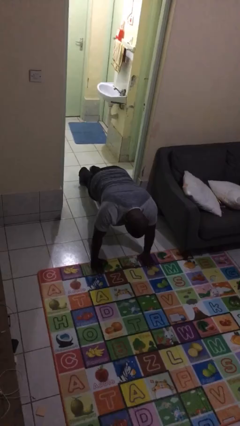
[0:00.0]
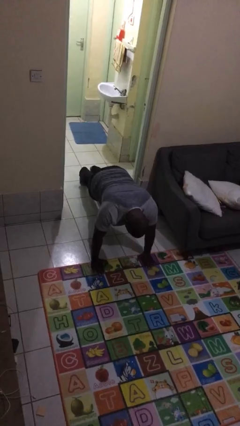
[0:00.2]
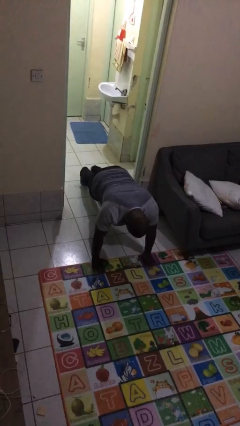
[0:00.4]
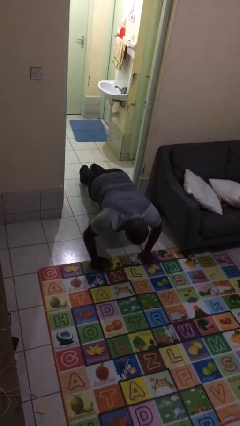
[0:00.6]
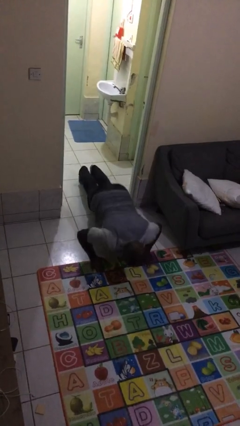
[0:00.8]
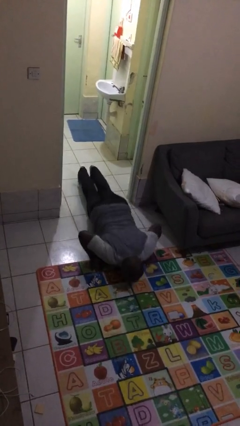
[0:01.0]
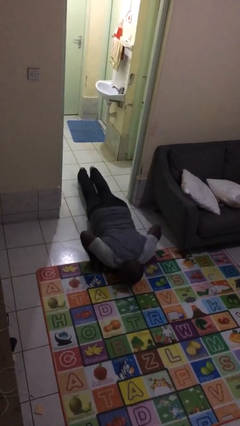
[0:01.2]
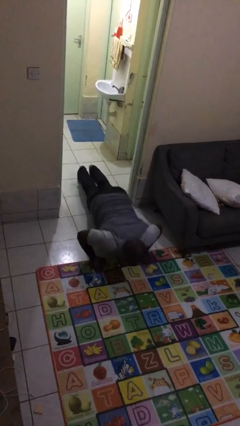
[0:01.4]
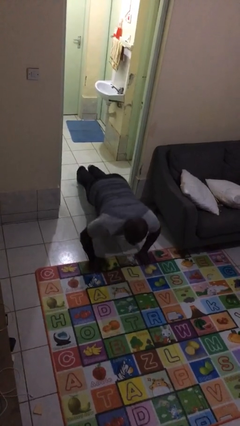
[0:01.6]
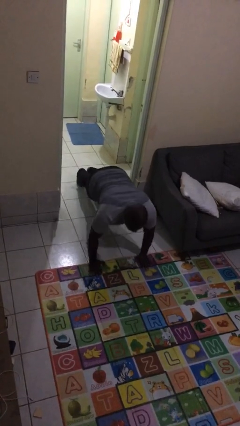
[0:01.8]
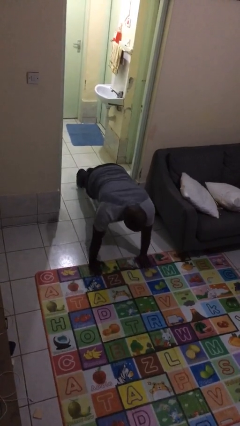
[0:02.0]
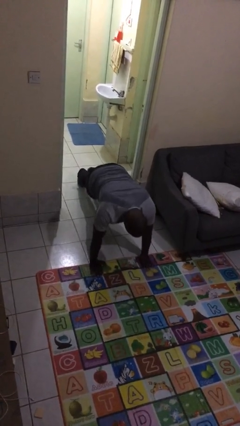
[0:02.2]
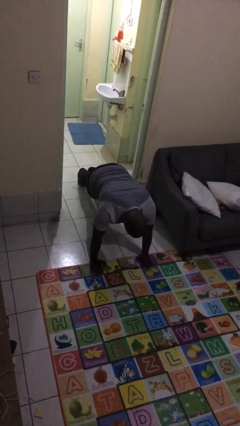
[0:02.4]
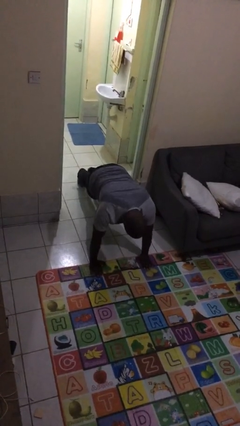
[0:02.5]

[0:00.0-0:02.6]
person exercises with pushup

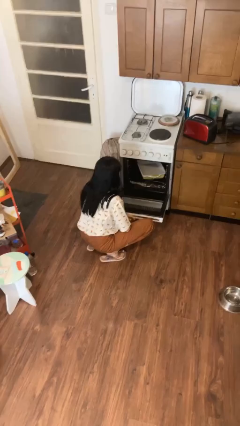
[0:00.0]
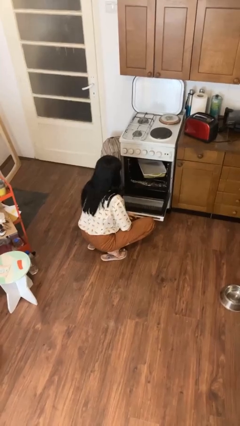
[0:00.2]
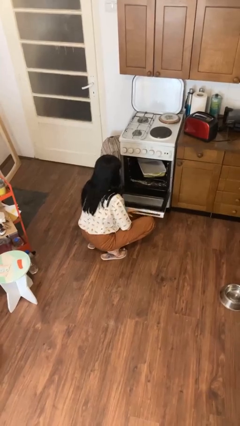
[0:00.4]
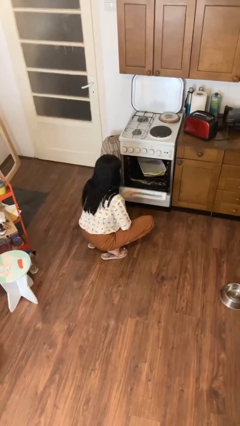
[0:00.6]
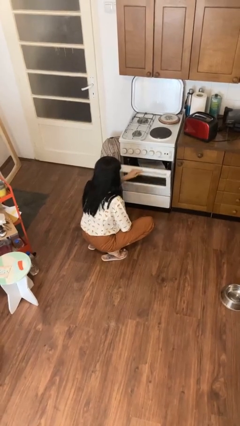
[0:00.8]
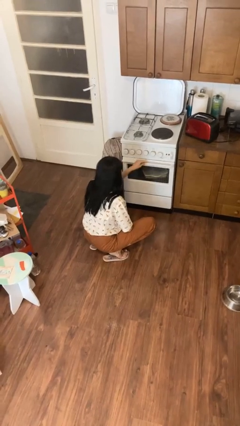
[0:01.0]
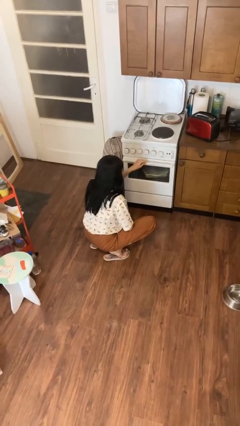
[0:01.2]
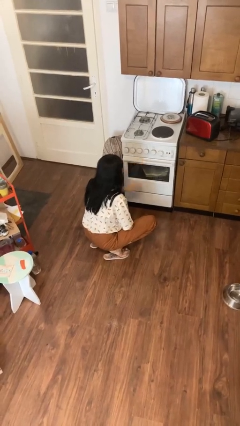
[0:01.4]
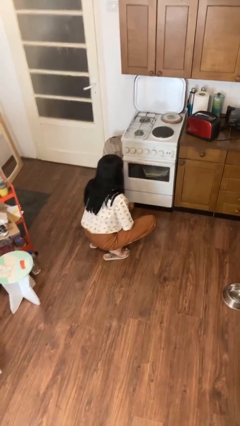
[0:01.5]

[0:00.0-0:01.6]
person closes oven door

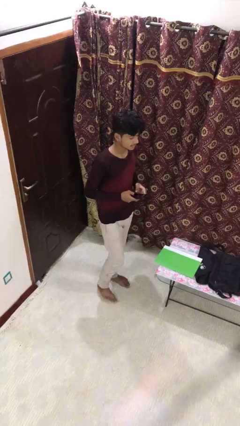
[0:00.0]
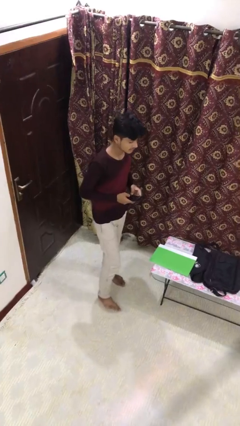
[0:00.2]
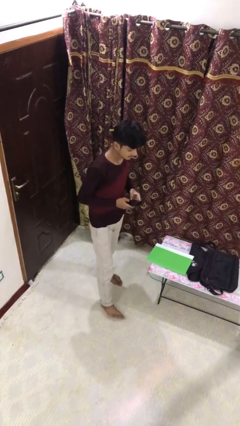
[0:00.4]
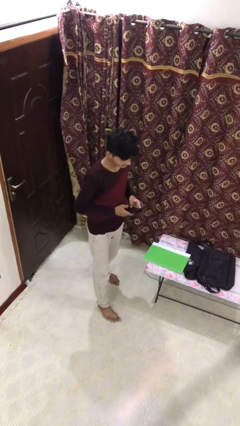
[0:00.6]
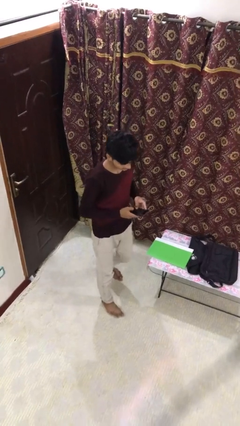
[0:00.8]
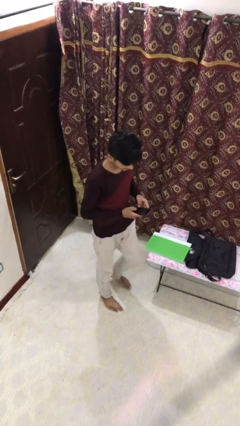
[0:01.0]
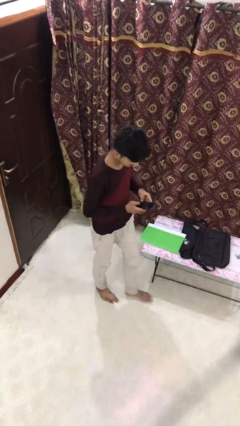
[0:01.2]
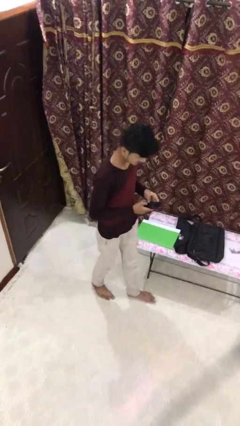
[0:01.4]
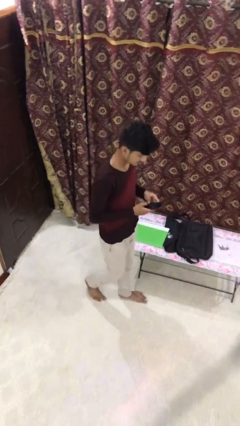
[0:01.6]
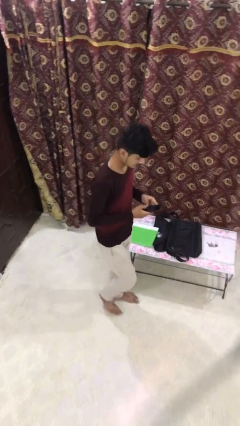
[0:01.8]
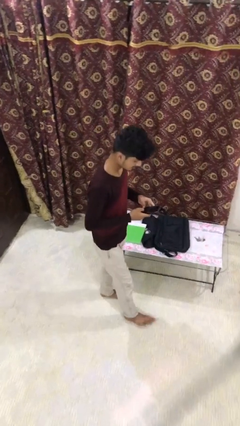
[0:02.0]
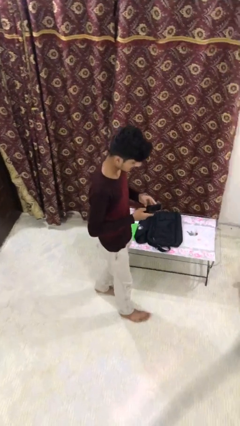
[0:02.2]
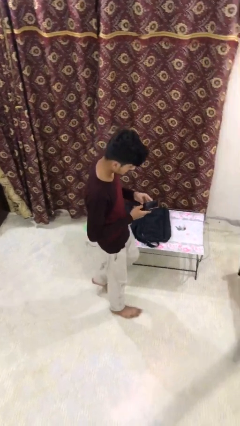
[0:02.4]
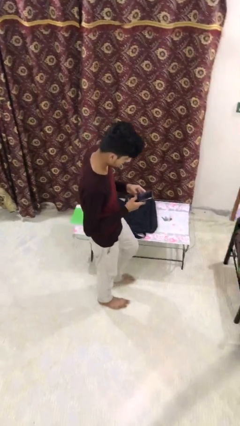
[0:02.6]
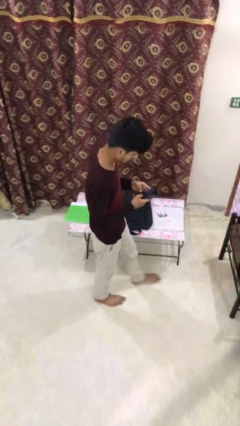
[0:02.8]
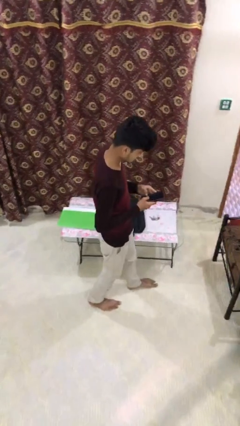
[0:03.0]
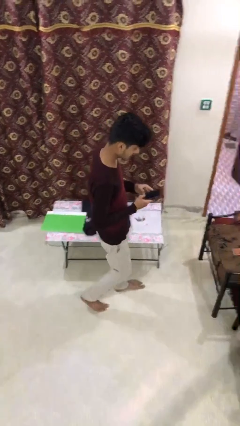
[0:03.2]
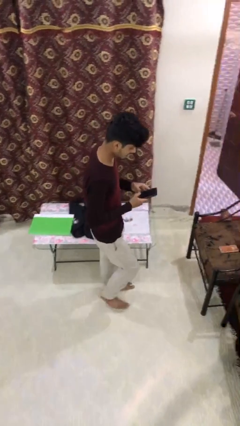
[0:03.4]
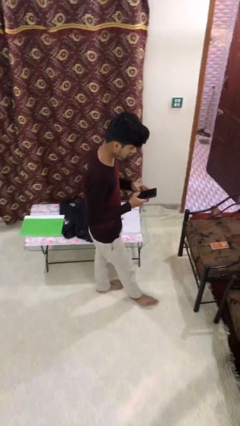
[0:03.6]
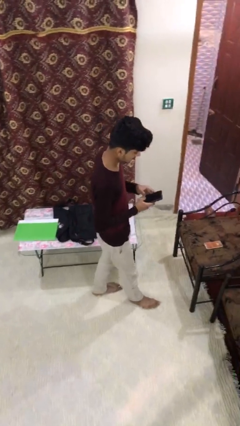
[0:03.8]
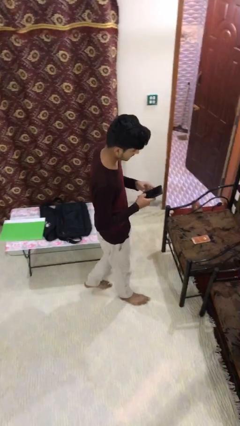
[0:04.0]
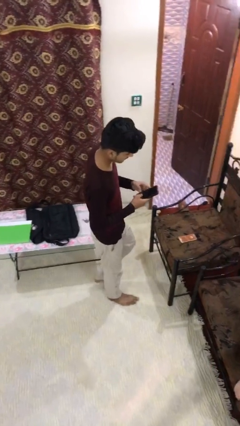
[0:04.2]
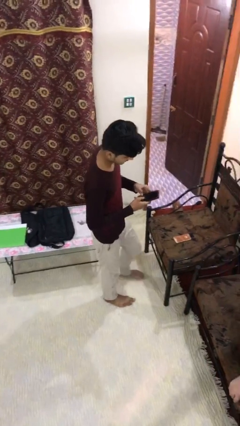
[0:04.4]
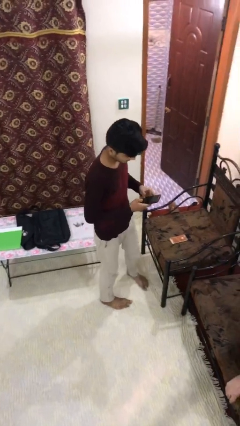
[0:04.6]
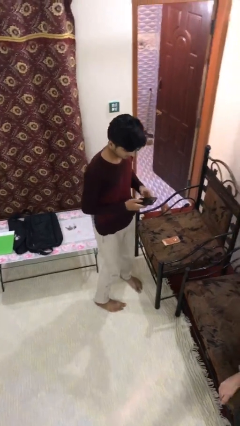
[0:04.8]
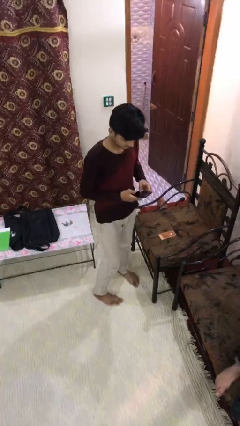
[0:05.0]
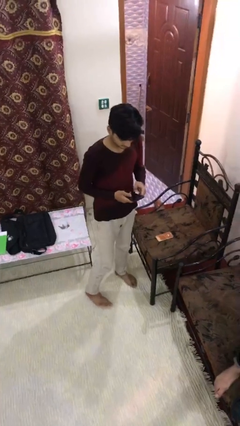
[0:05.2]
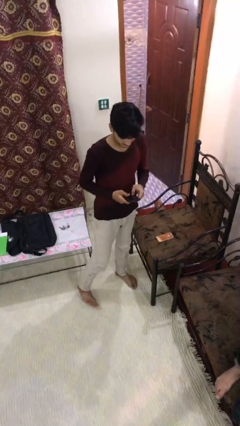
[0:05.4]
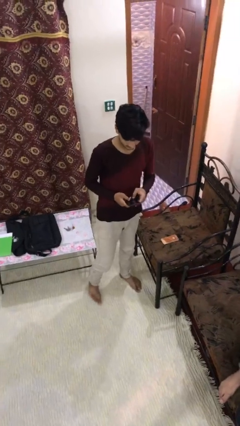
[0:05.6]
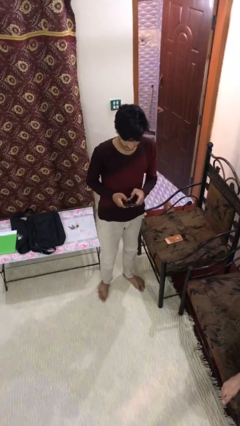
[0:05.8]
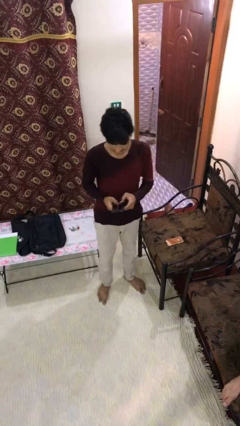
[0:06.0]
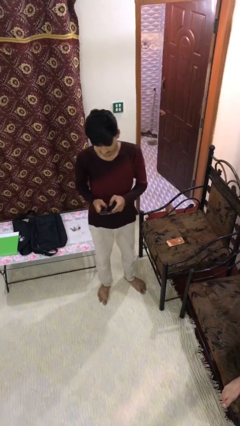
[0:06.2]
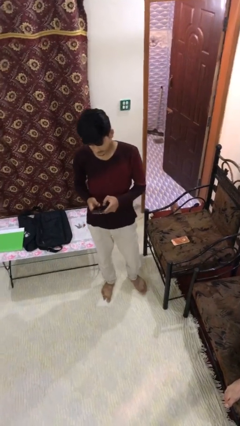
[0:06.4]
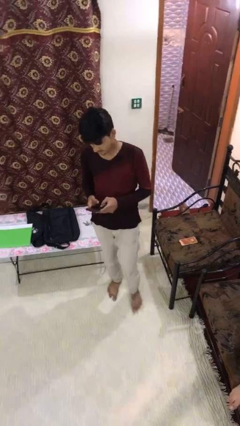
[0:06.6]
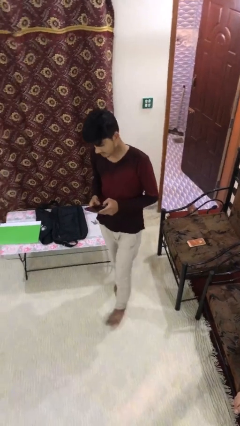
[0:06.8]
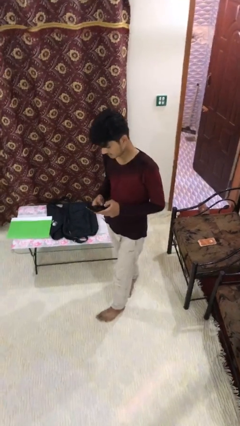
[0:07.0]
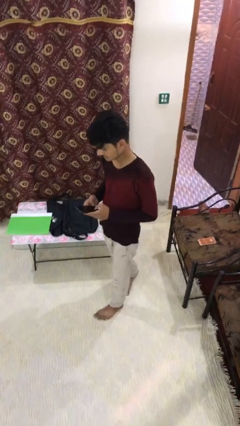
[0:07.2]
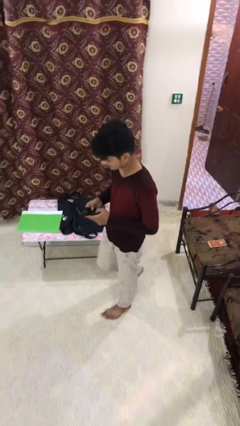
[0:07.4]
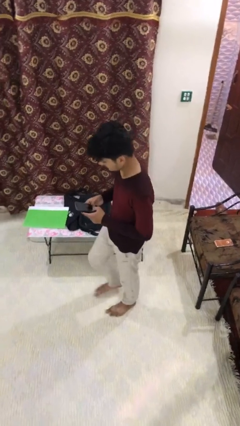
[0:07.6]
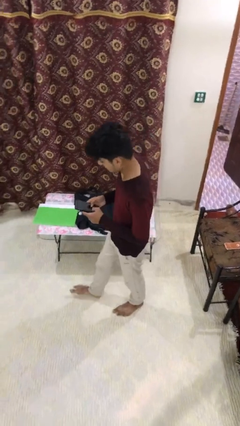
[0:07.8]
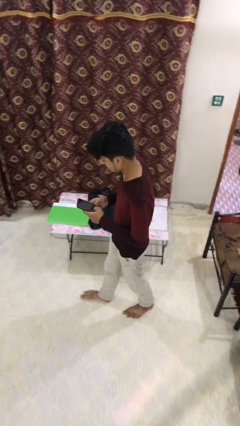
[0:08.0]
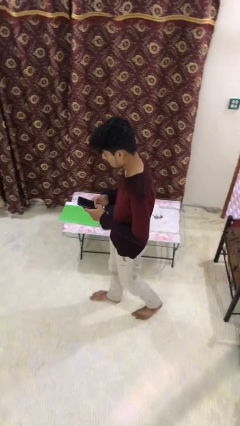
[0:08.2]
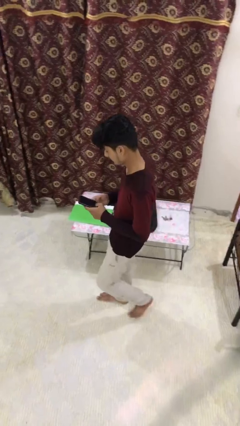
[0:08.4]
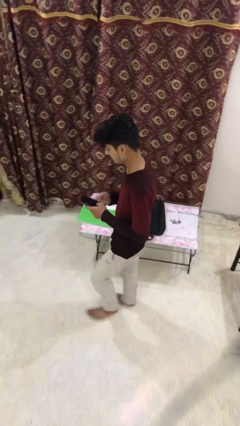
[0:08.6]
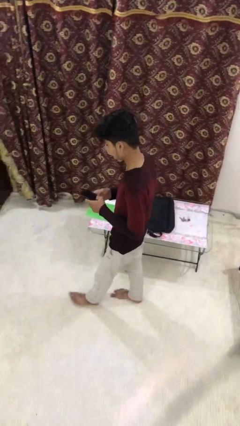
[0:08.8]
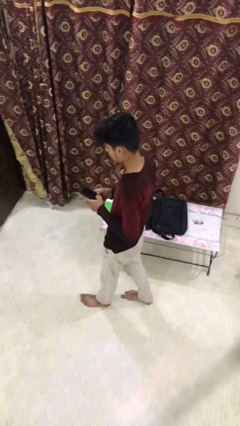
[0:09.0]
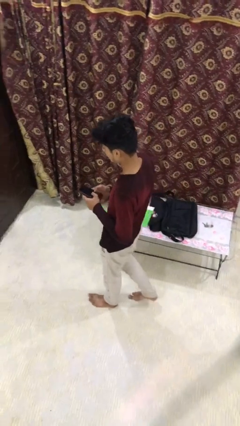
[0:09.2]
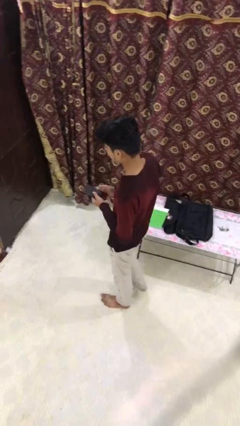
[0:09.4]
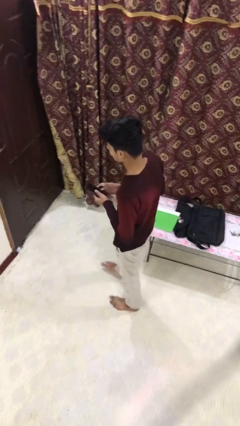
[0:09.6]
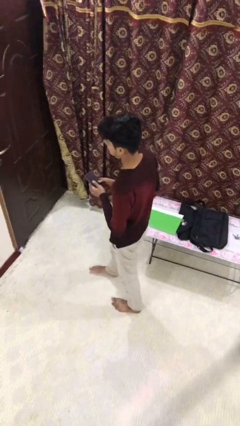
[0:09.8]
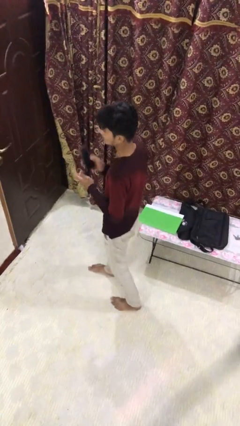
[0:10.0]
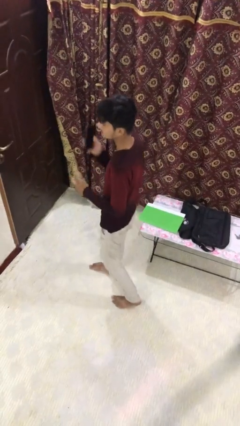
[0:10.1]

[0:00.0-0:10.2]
person texts on phone

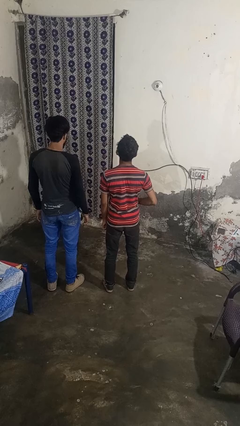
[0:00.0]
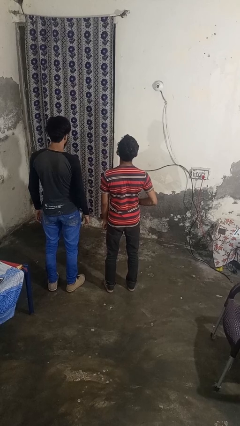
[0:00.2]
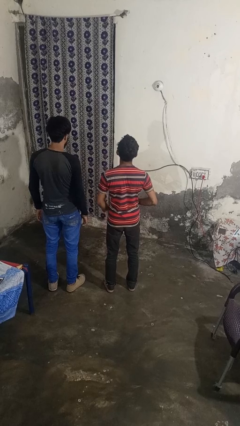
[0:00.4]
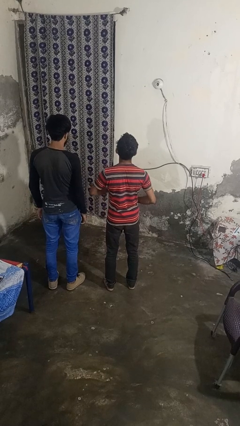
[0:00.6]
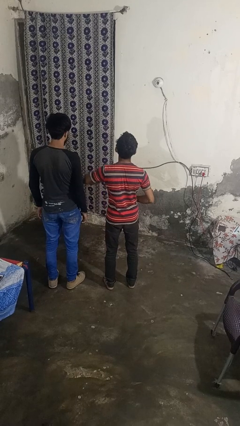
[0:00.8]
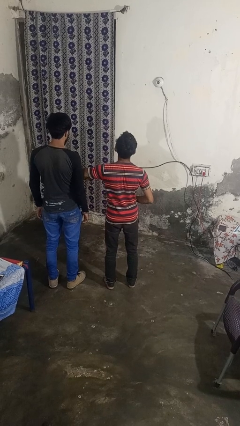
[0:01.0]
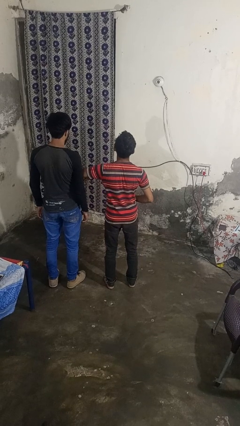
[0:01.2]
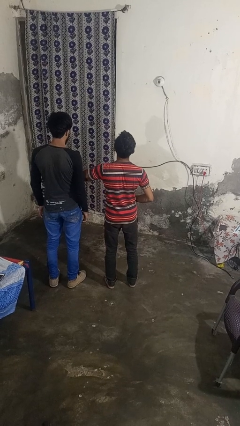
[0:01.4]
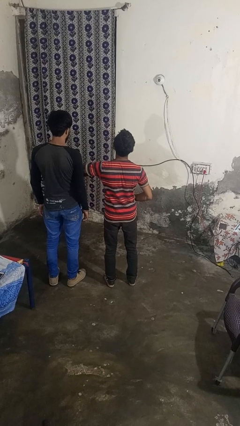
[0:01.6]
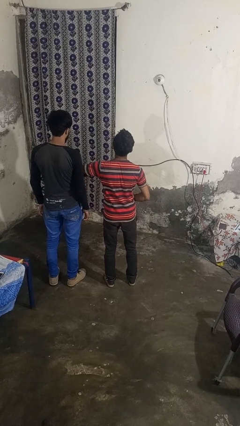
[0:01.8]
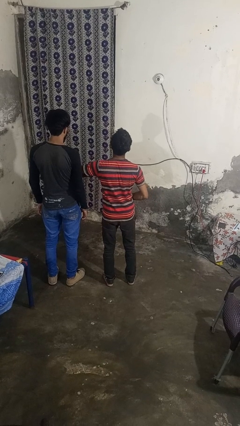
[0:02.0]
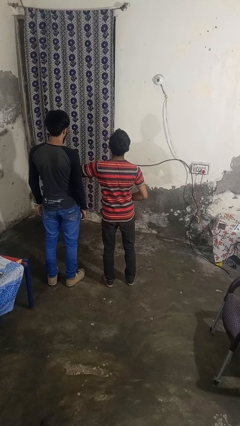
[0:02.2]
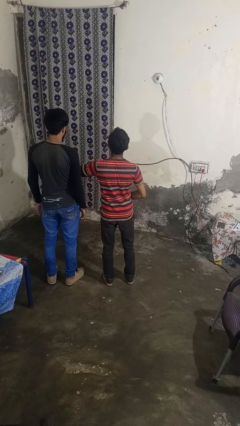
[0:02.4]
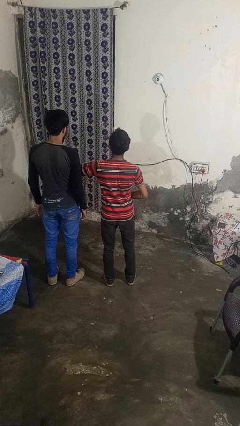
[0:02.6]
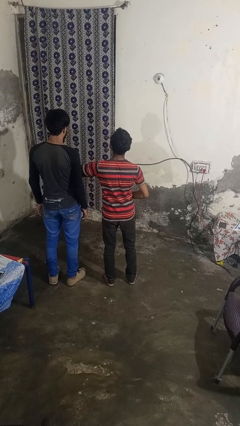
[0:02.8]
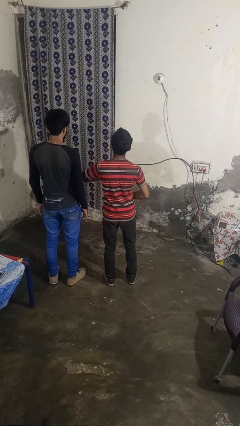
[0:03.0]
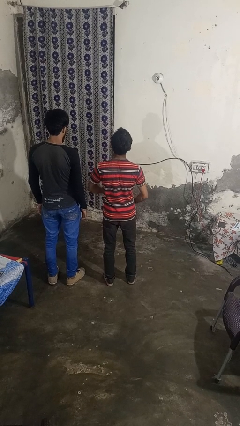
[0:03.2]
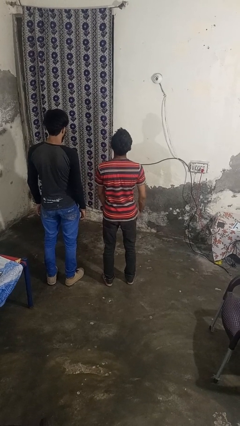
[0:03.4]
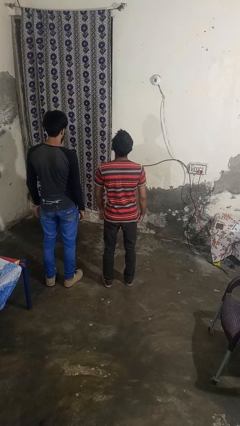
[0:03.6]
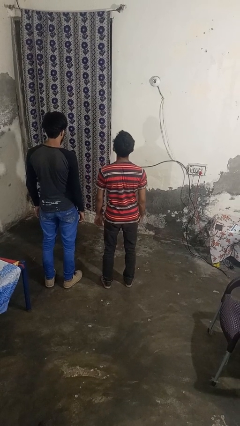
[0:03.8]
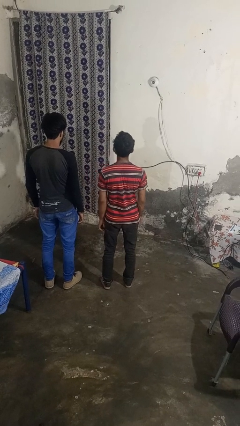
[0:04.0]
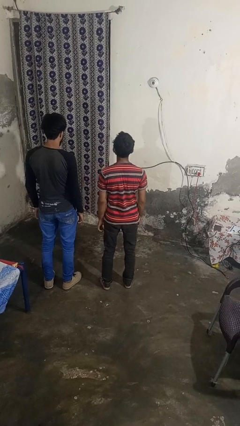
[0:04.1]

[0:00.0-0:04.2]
person nudges person with elbow
